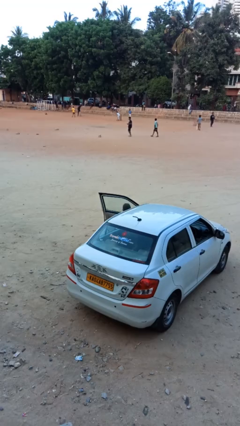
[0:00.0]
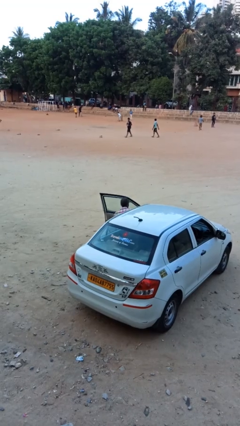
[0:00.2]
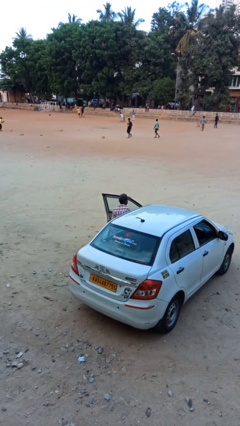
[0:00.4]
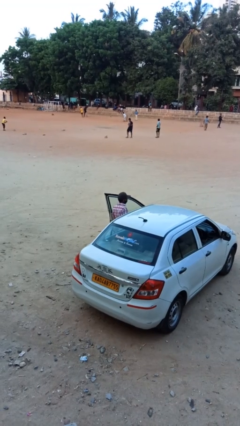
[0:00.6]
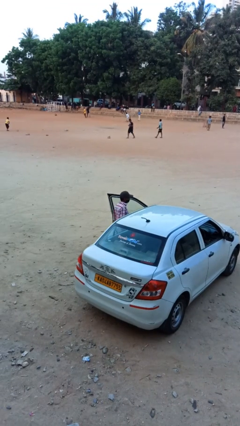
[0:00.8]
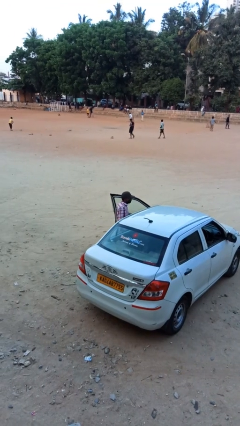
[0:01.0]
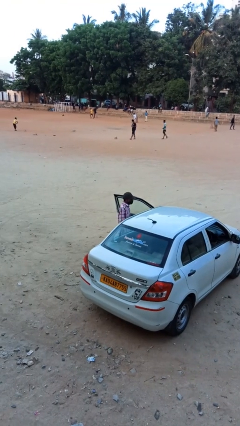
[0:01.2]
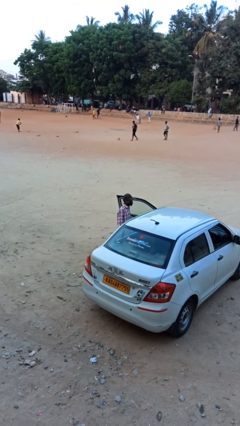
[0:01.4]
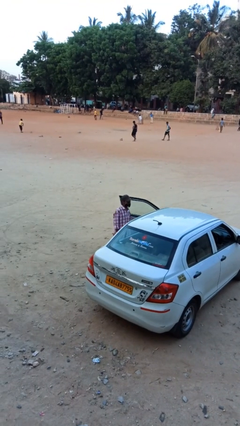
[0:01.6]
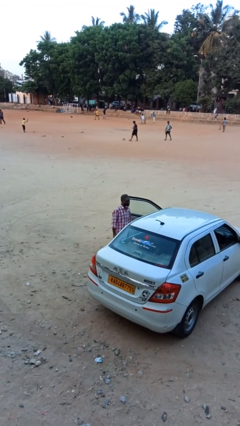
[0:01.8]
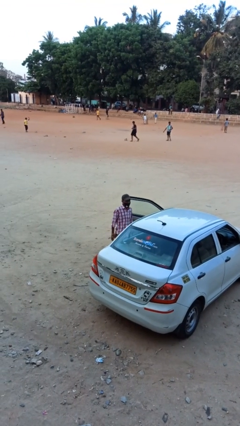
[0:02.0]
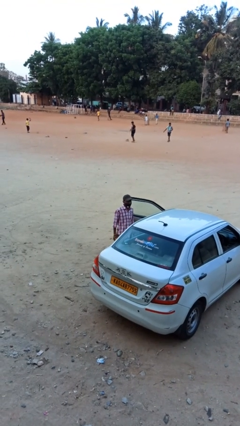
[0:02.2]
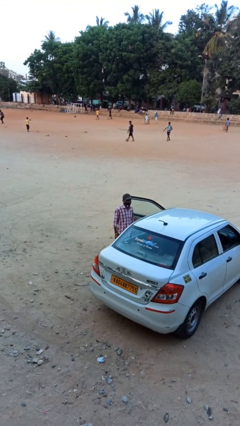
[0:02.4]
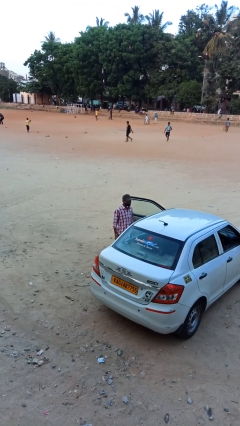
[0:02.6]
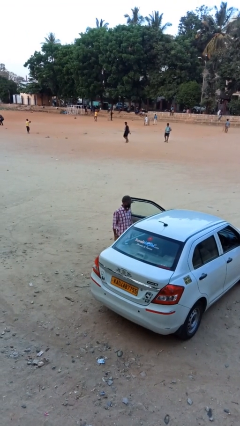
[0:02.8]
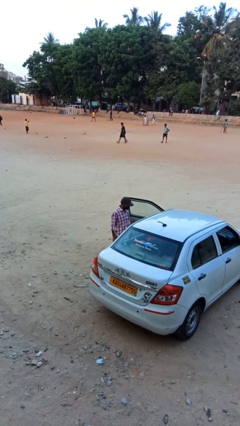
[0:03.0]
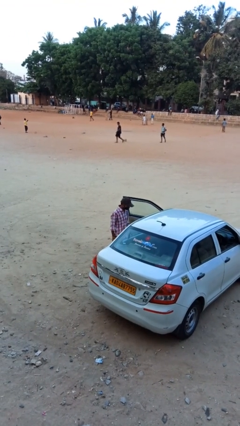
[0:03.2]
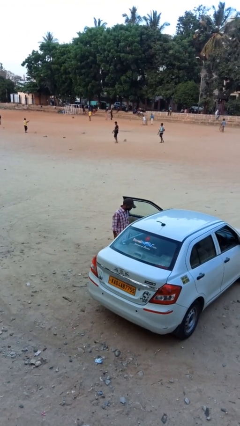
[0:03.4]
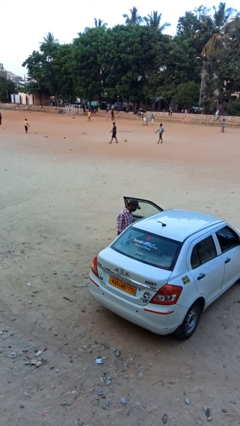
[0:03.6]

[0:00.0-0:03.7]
person exits car

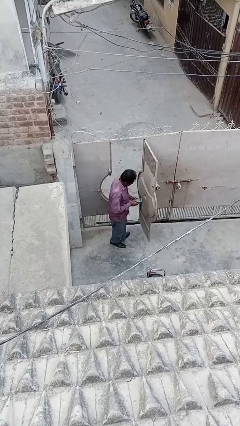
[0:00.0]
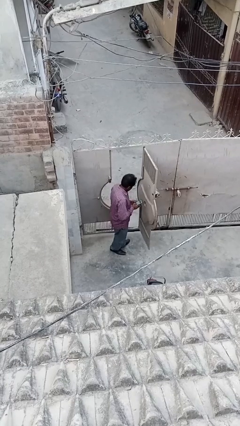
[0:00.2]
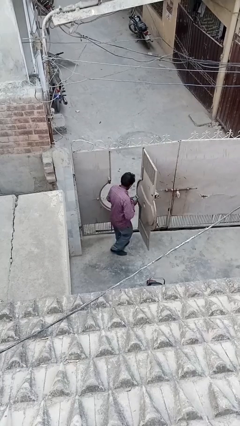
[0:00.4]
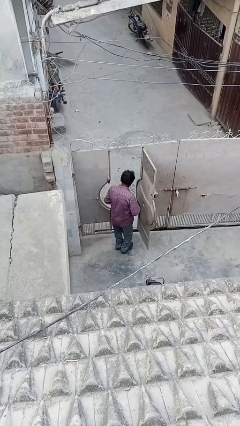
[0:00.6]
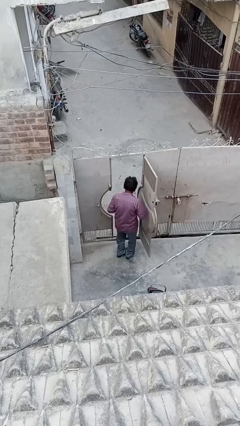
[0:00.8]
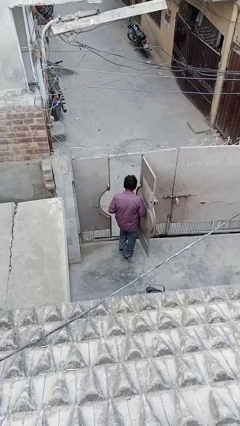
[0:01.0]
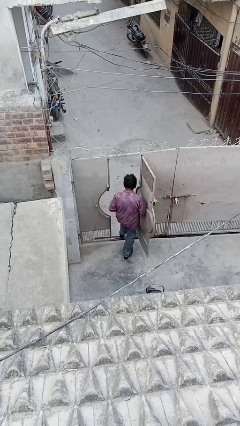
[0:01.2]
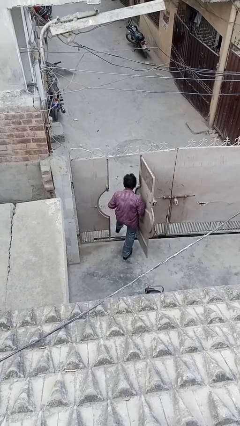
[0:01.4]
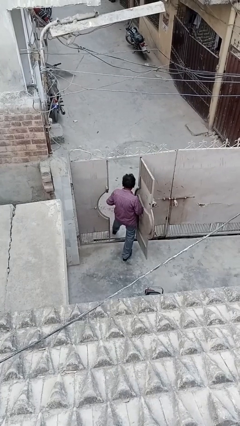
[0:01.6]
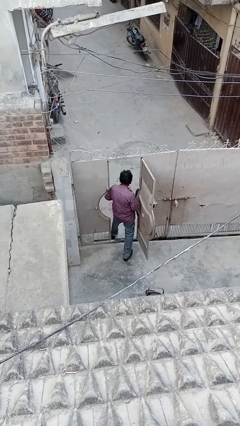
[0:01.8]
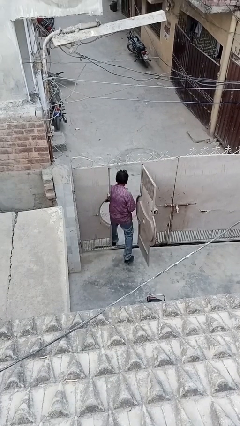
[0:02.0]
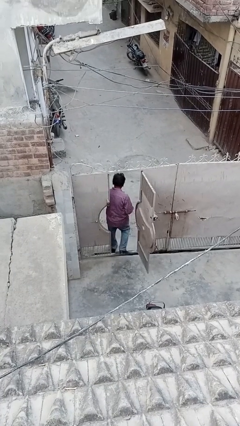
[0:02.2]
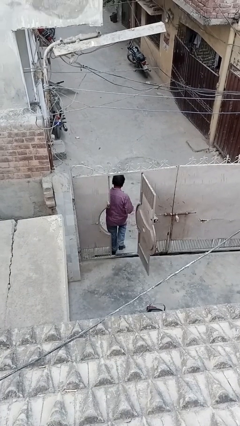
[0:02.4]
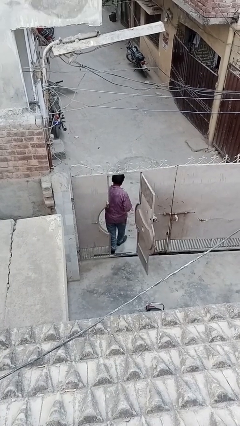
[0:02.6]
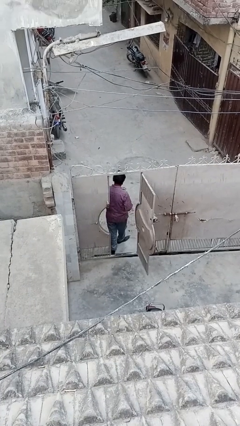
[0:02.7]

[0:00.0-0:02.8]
person exits scene through structure

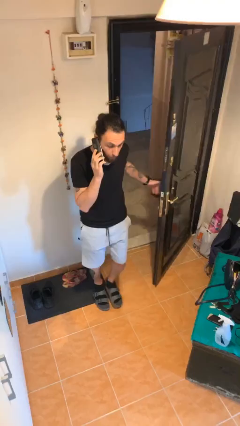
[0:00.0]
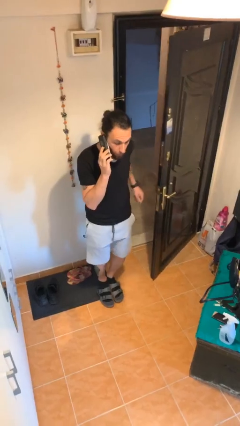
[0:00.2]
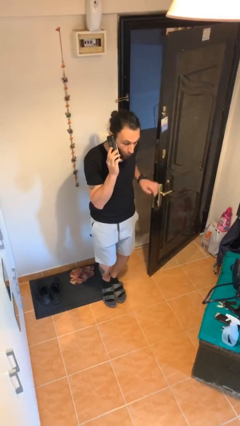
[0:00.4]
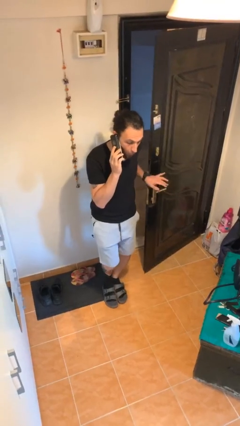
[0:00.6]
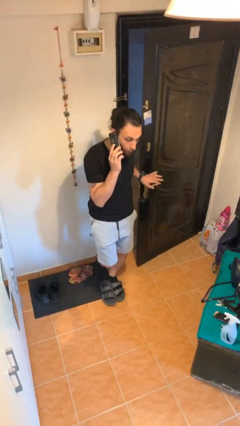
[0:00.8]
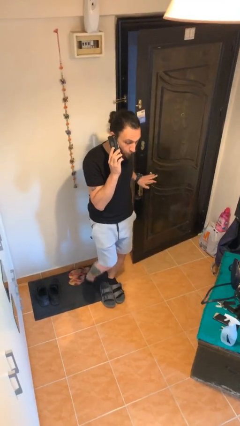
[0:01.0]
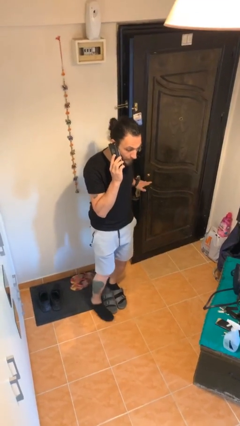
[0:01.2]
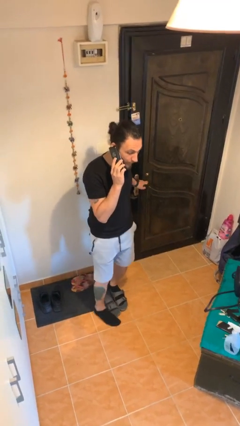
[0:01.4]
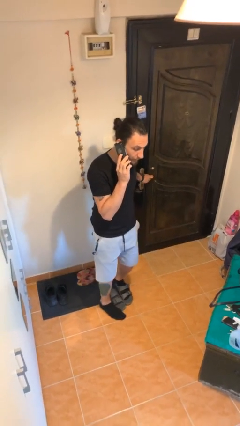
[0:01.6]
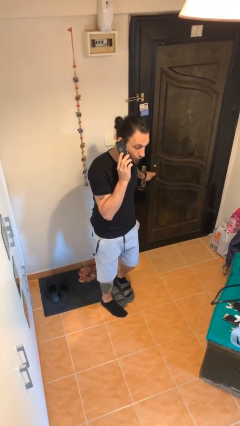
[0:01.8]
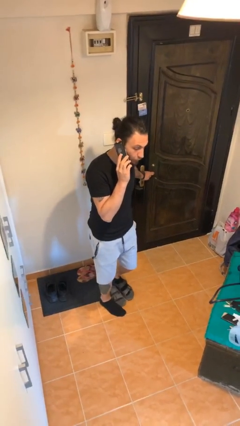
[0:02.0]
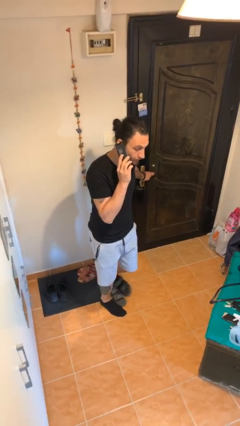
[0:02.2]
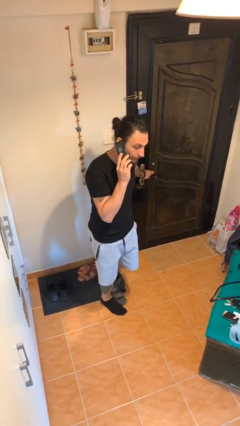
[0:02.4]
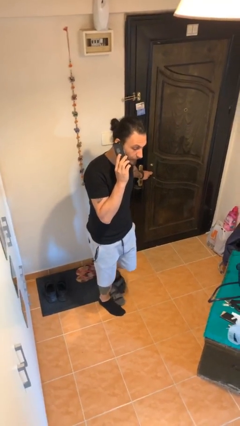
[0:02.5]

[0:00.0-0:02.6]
person closes facility door

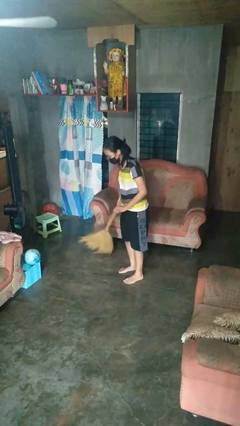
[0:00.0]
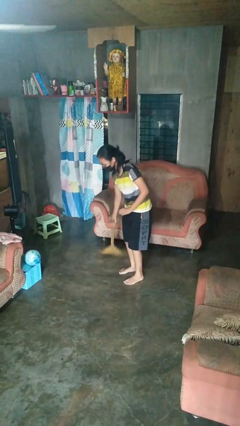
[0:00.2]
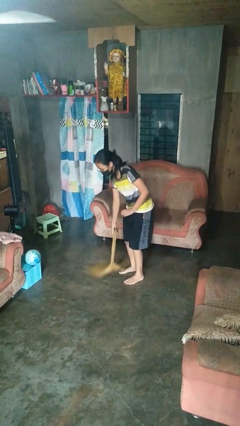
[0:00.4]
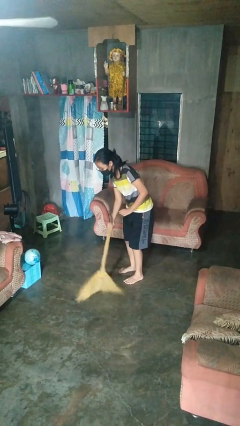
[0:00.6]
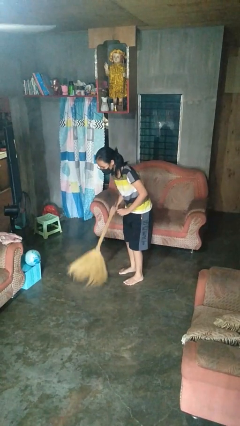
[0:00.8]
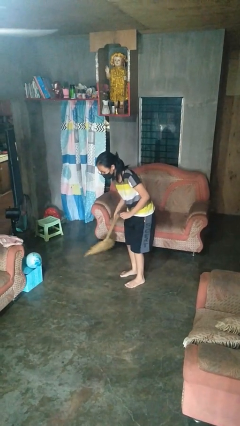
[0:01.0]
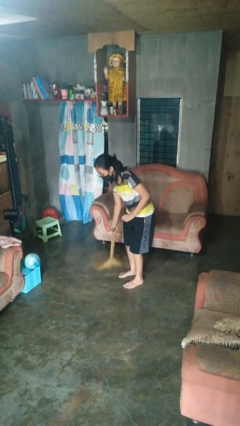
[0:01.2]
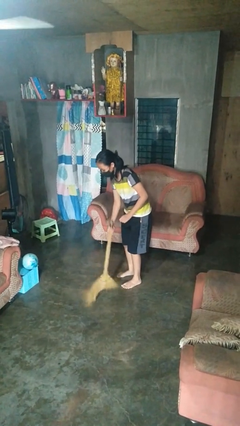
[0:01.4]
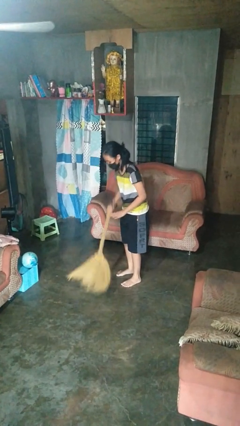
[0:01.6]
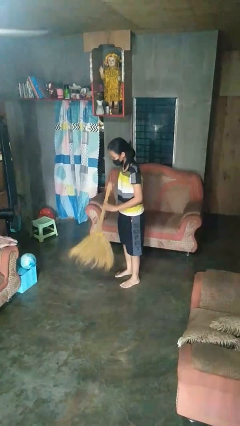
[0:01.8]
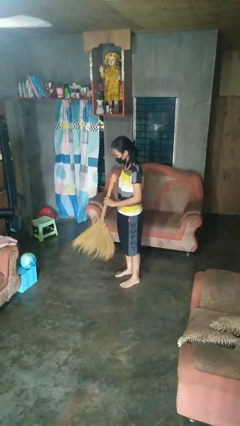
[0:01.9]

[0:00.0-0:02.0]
person sweeps floor

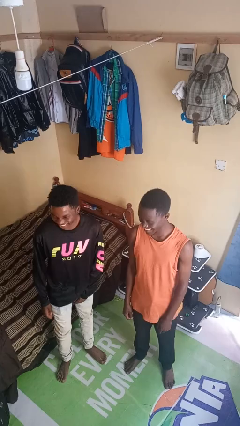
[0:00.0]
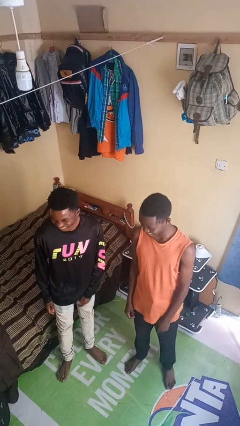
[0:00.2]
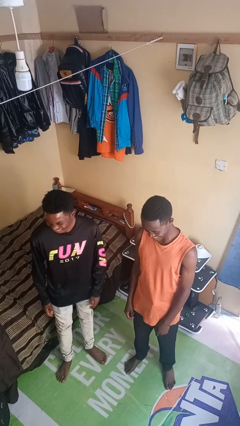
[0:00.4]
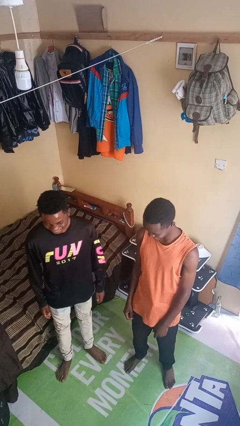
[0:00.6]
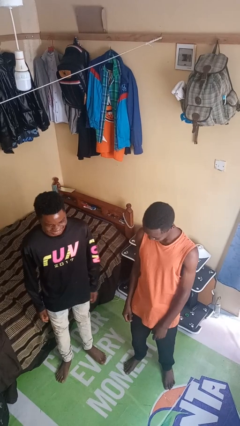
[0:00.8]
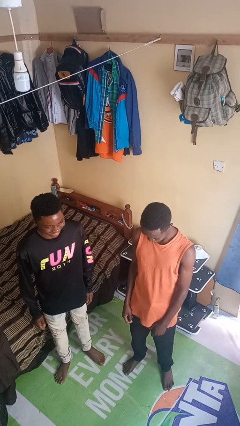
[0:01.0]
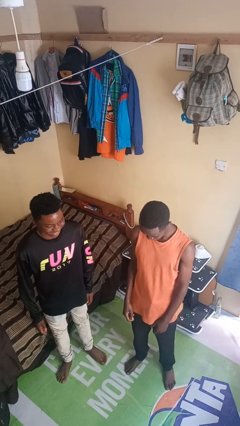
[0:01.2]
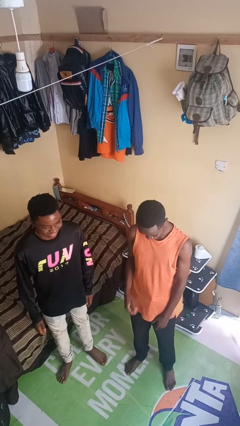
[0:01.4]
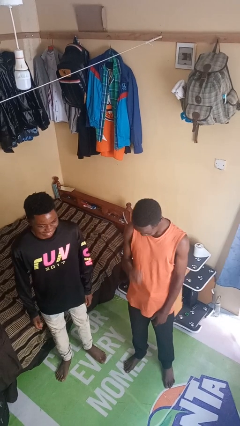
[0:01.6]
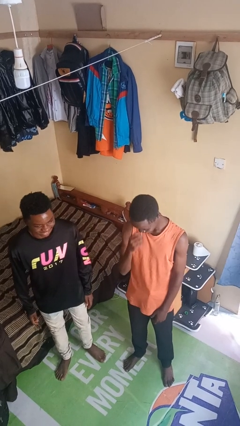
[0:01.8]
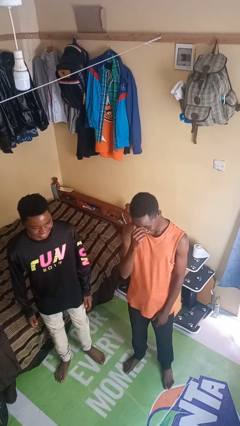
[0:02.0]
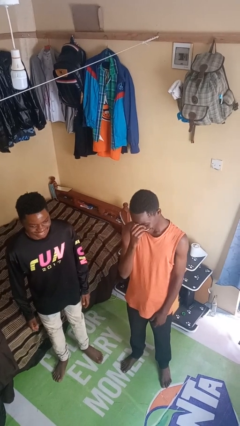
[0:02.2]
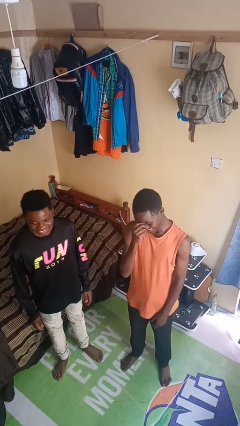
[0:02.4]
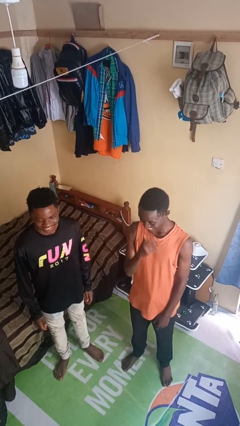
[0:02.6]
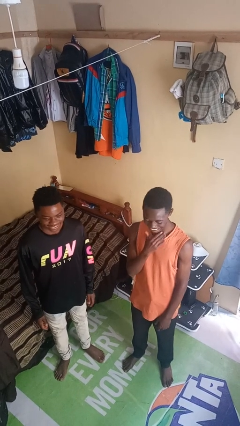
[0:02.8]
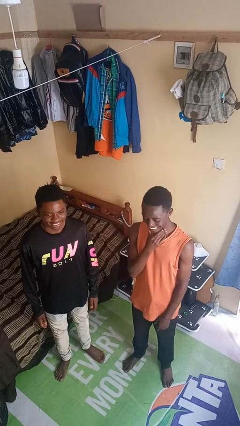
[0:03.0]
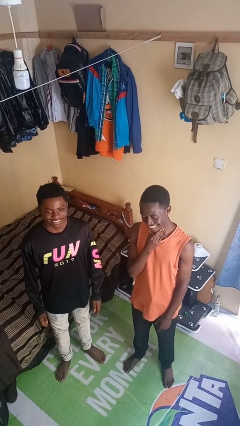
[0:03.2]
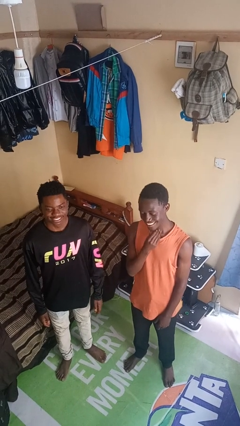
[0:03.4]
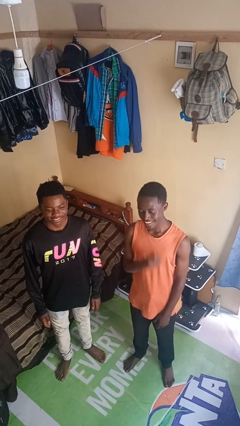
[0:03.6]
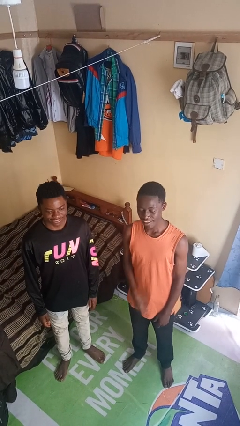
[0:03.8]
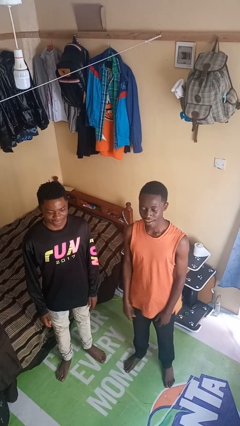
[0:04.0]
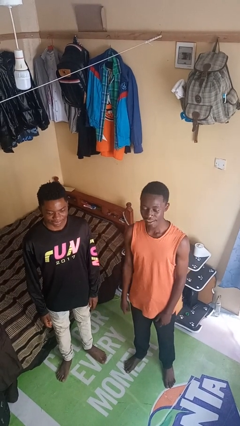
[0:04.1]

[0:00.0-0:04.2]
person laughs with person

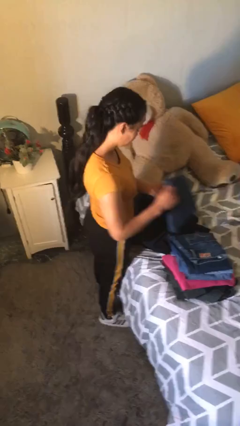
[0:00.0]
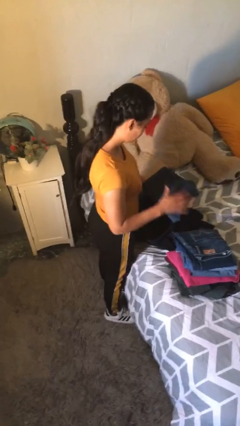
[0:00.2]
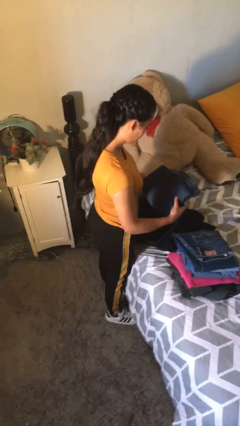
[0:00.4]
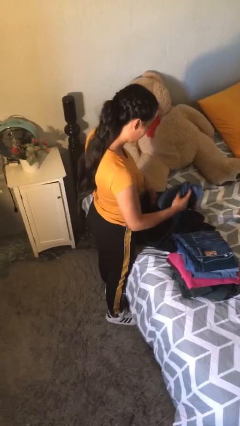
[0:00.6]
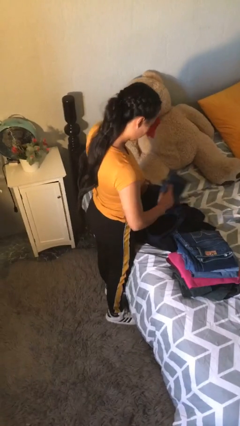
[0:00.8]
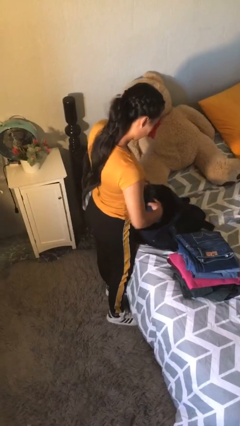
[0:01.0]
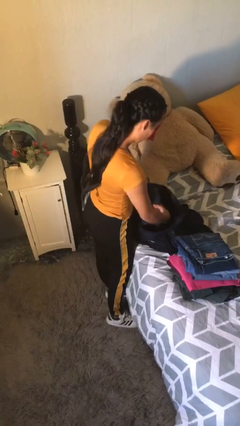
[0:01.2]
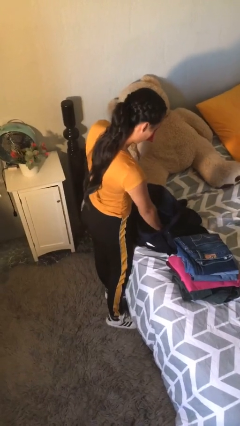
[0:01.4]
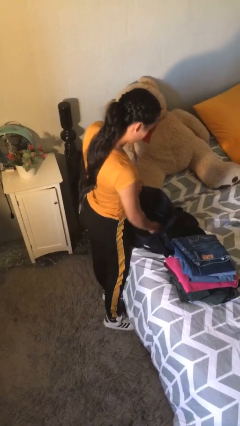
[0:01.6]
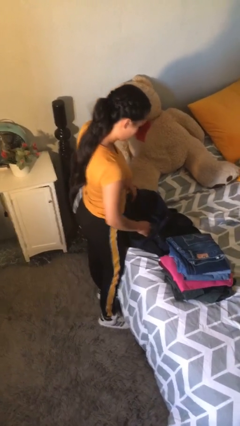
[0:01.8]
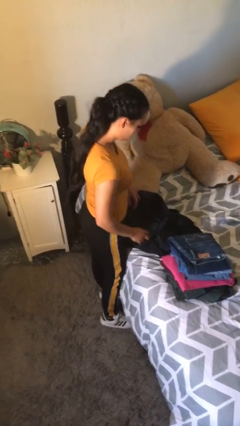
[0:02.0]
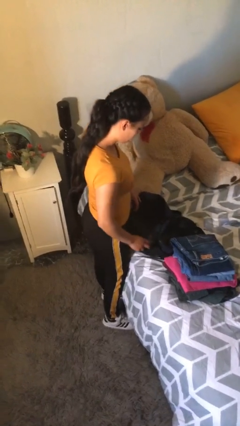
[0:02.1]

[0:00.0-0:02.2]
person loads clothes into suitcase
